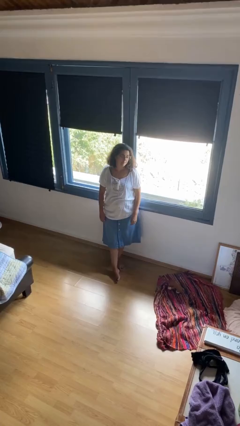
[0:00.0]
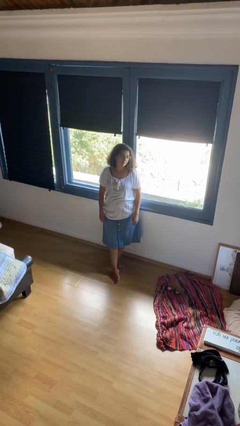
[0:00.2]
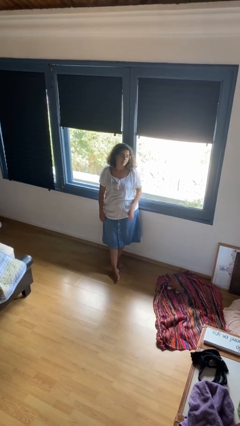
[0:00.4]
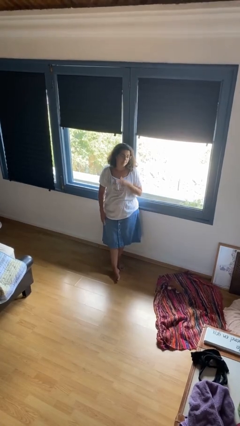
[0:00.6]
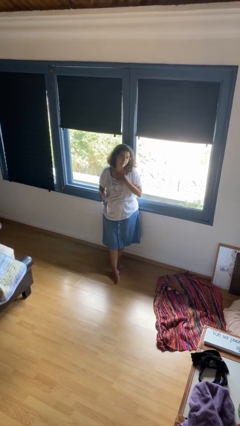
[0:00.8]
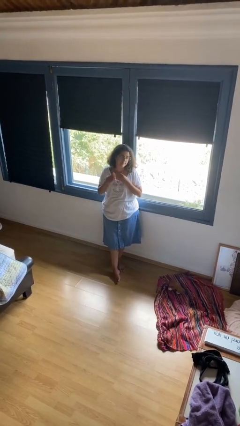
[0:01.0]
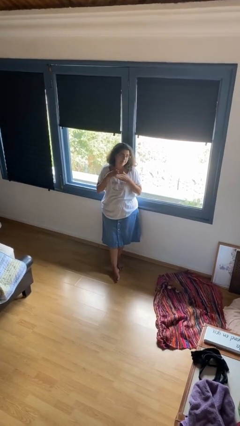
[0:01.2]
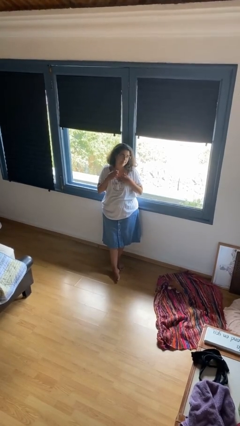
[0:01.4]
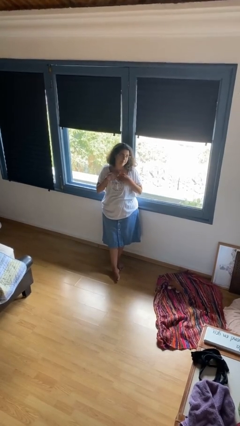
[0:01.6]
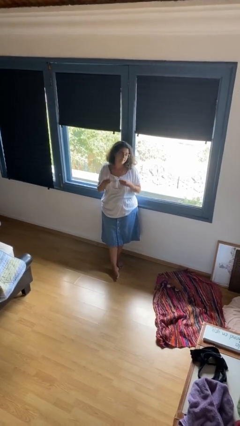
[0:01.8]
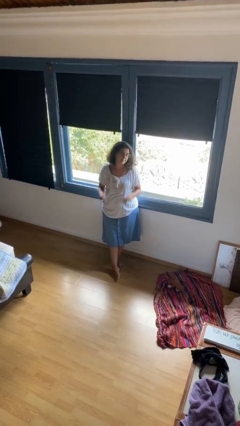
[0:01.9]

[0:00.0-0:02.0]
person drums on chest

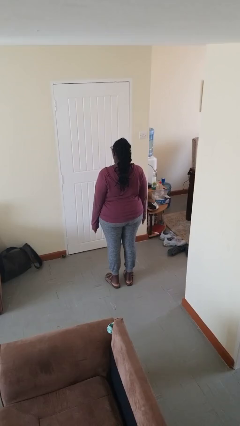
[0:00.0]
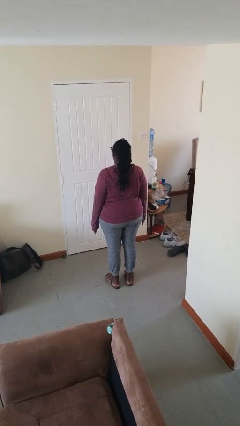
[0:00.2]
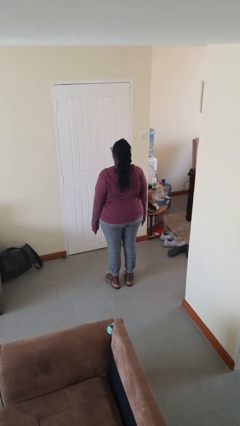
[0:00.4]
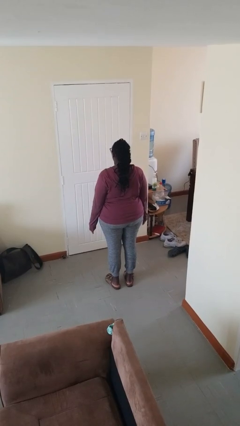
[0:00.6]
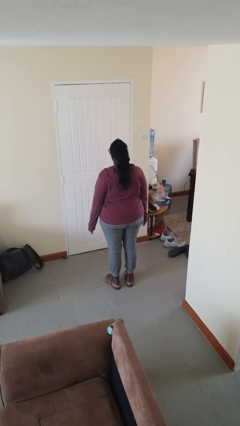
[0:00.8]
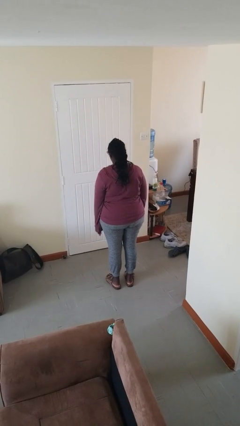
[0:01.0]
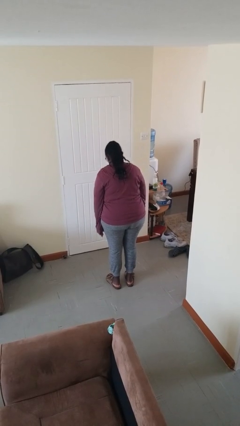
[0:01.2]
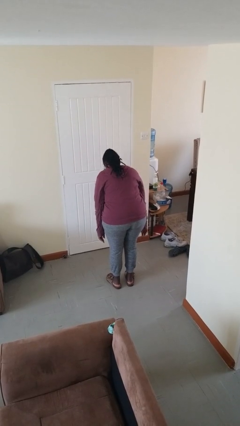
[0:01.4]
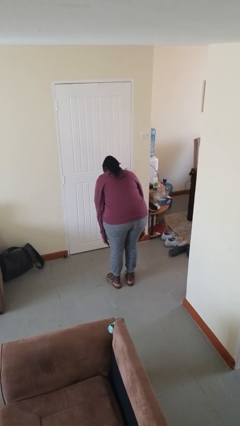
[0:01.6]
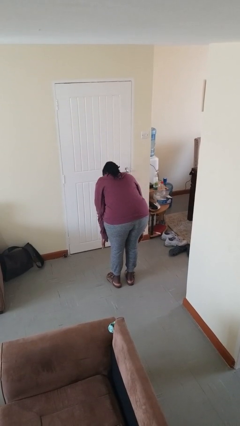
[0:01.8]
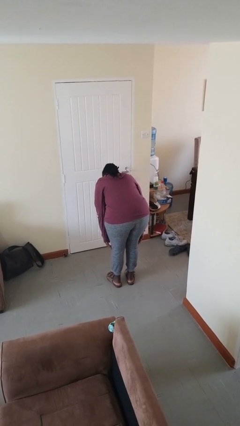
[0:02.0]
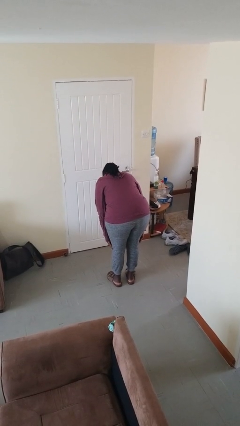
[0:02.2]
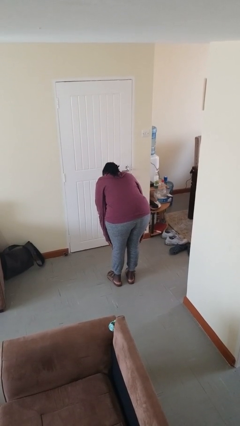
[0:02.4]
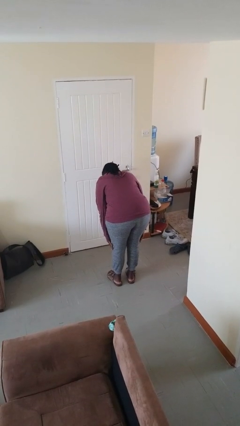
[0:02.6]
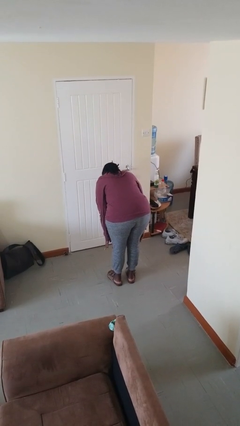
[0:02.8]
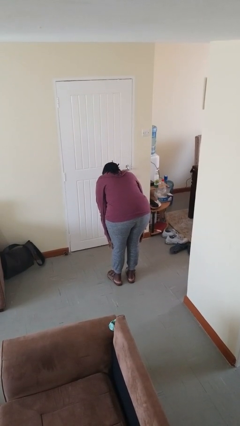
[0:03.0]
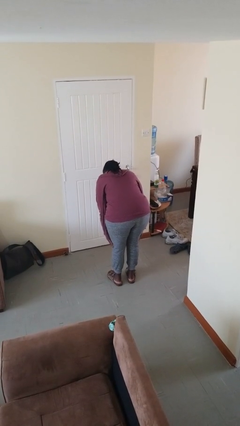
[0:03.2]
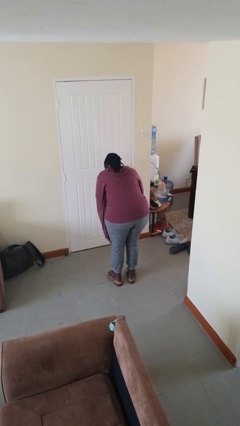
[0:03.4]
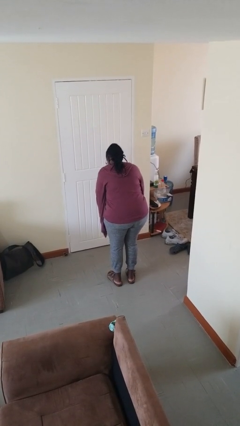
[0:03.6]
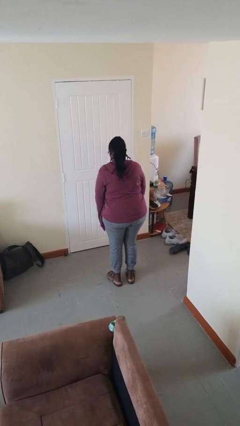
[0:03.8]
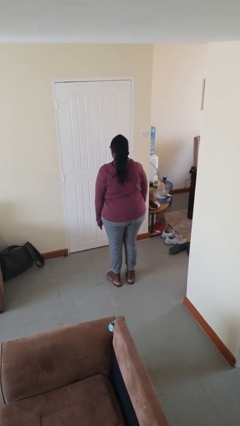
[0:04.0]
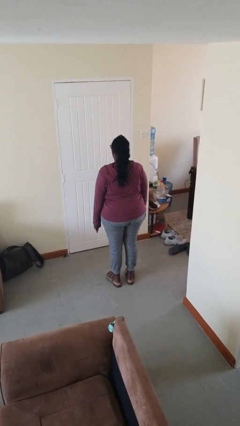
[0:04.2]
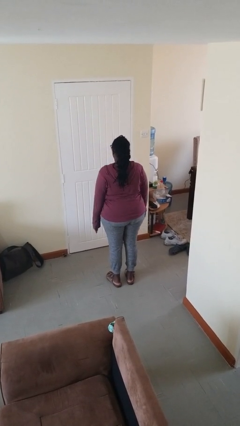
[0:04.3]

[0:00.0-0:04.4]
person bows

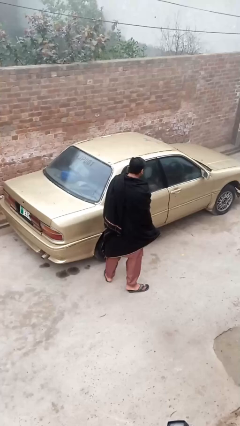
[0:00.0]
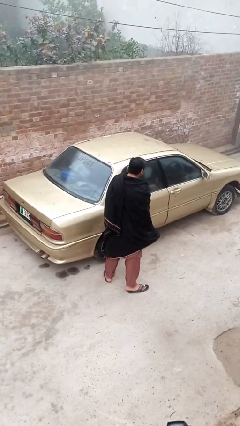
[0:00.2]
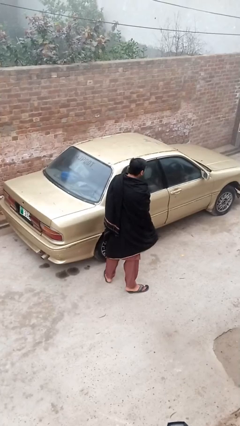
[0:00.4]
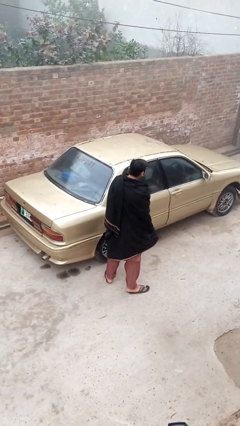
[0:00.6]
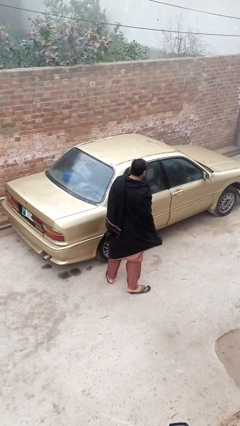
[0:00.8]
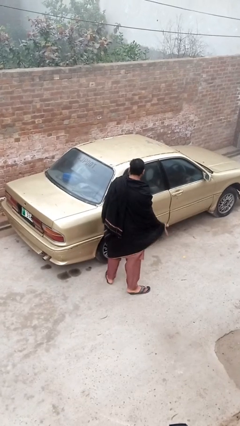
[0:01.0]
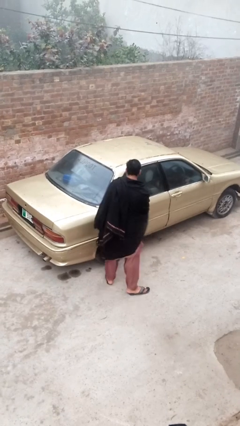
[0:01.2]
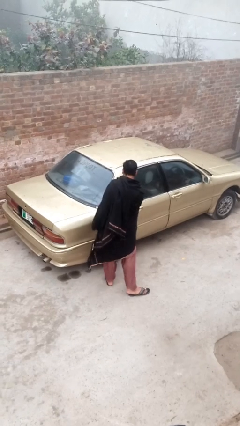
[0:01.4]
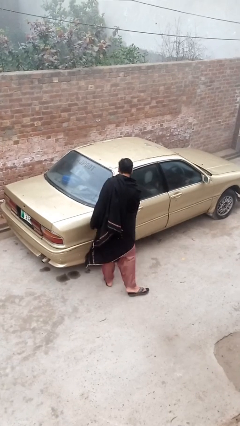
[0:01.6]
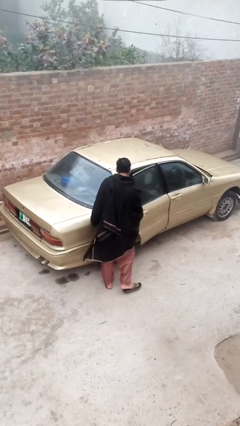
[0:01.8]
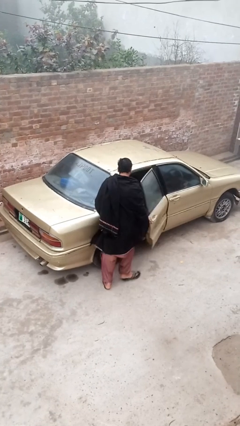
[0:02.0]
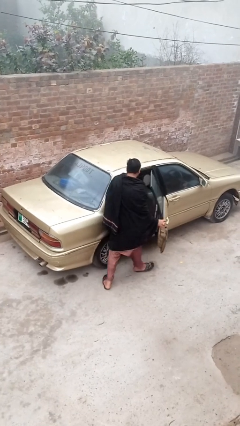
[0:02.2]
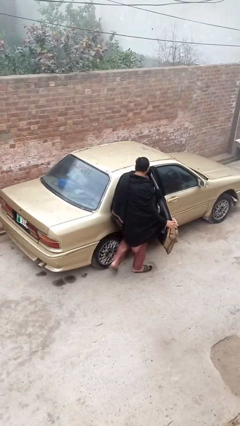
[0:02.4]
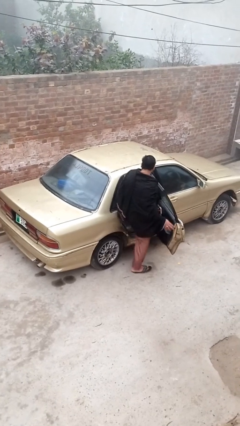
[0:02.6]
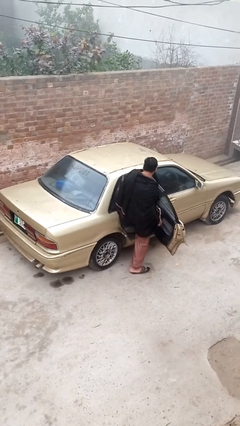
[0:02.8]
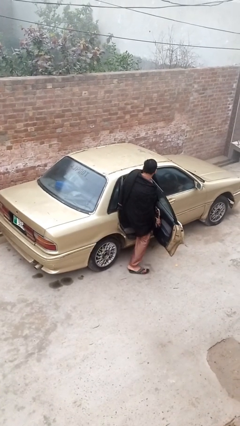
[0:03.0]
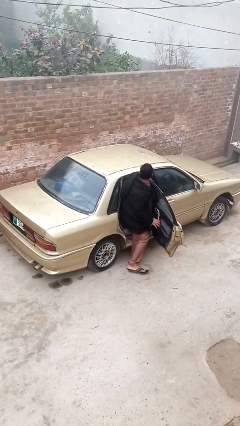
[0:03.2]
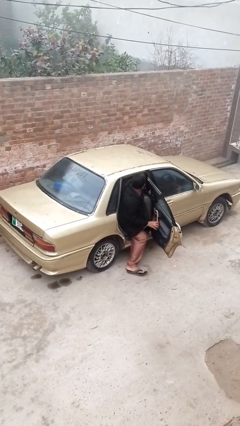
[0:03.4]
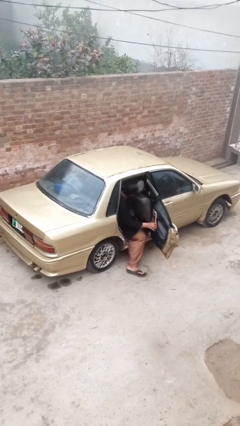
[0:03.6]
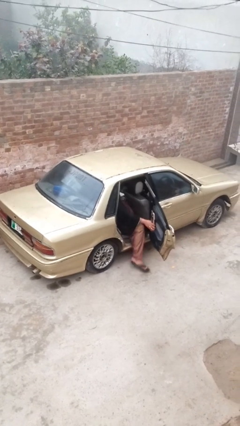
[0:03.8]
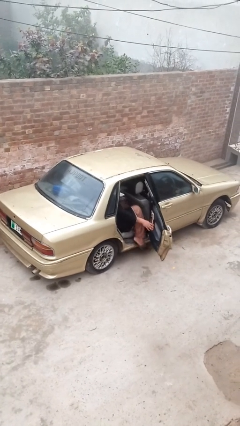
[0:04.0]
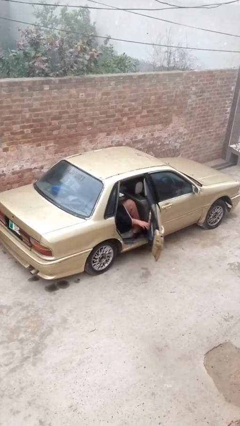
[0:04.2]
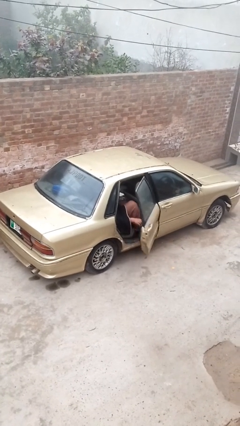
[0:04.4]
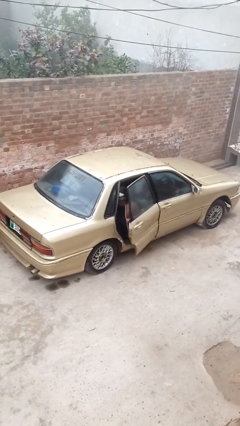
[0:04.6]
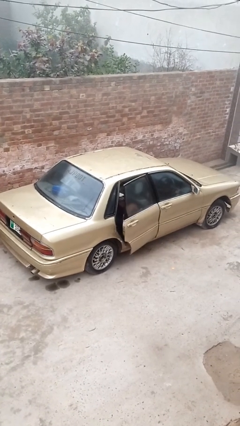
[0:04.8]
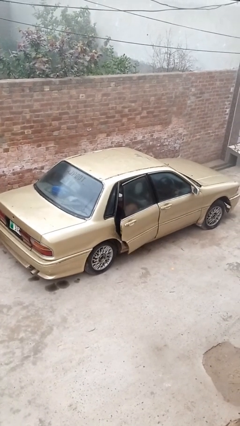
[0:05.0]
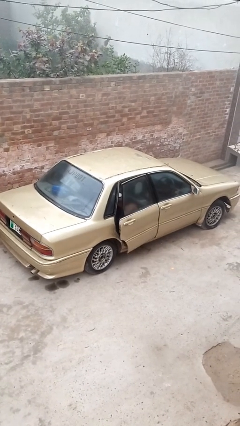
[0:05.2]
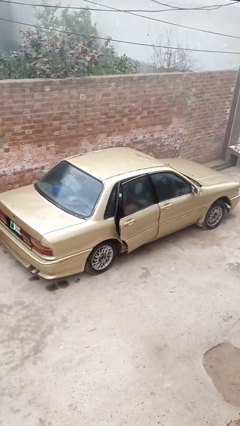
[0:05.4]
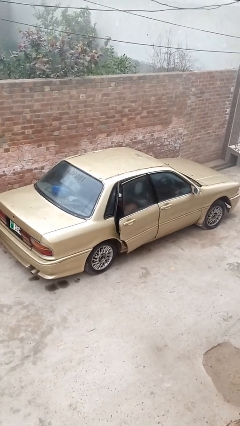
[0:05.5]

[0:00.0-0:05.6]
car picks up person

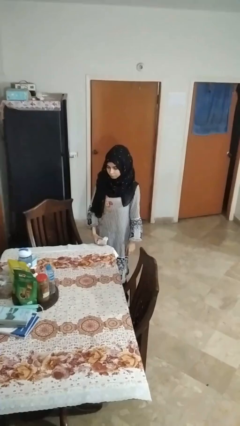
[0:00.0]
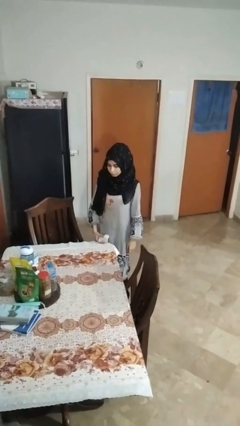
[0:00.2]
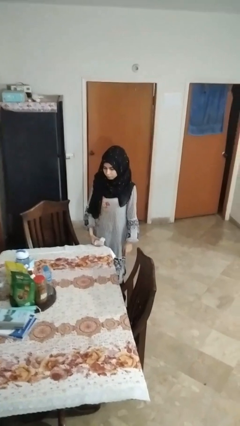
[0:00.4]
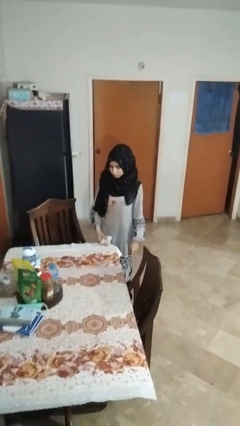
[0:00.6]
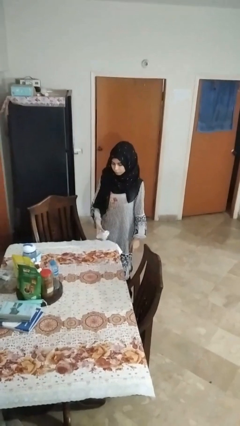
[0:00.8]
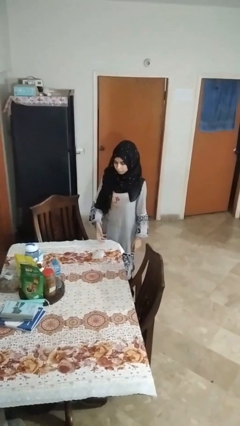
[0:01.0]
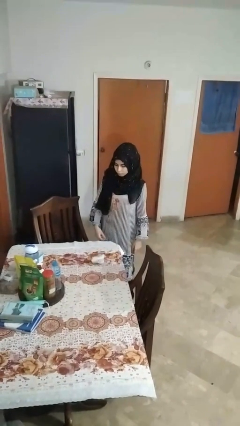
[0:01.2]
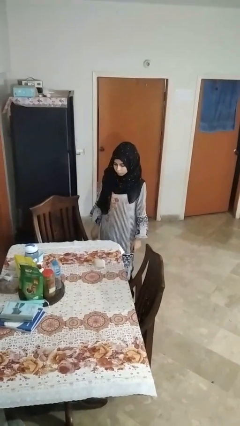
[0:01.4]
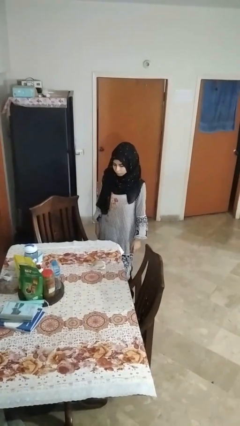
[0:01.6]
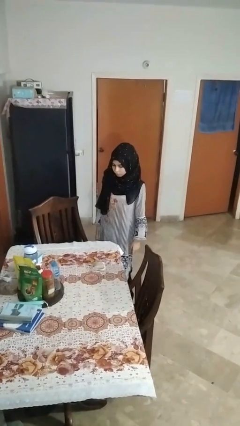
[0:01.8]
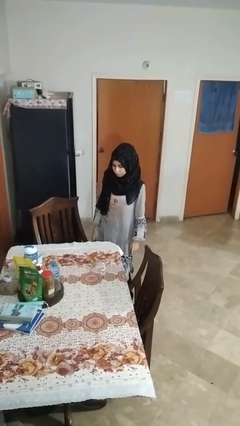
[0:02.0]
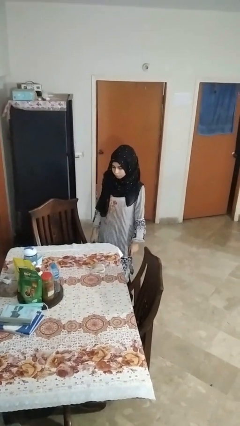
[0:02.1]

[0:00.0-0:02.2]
person throws object on table

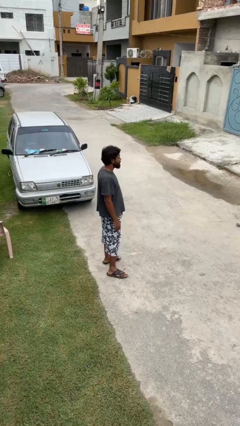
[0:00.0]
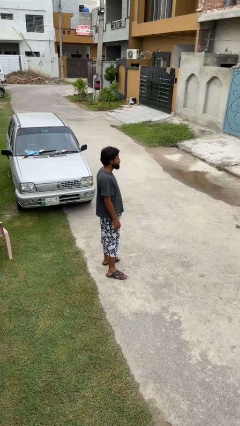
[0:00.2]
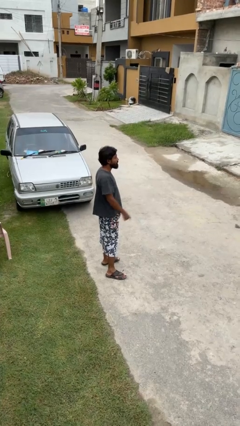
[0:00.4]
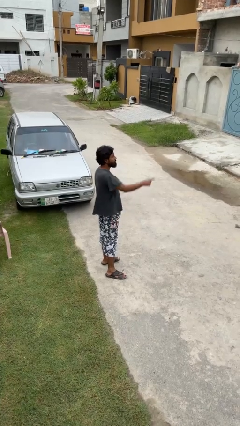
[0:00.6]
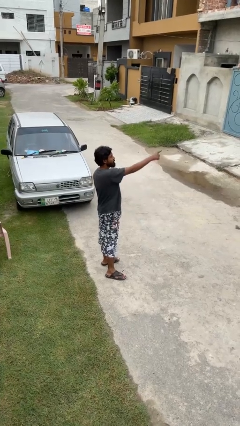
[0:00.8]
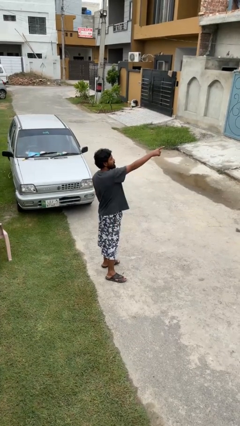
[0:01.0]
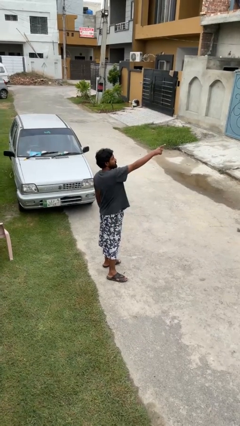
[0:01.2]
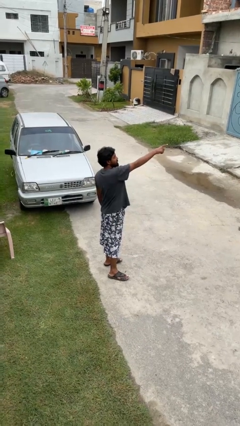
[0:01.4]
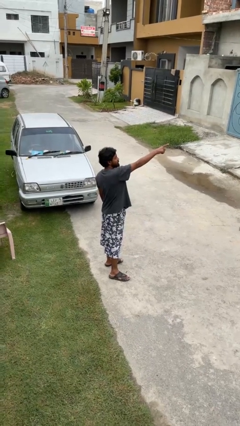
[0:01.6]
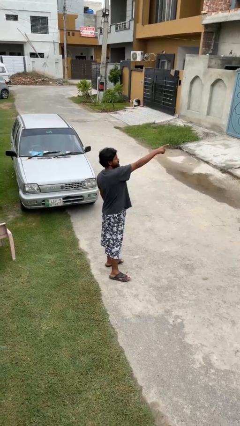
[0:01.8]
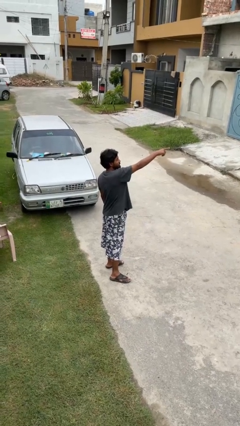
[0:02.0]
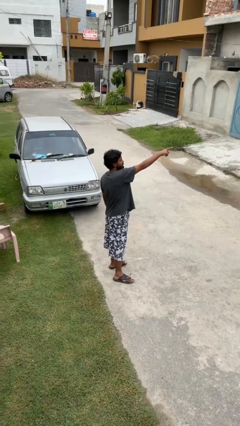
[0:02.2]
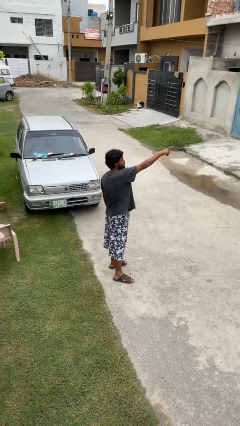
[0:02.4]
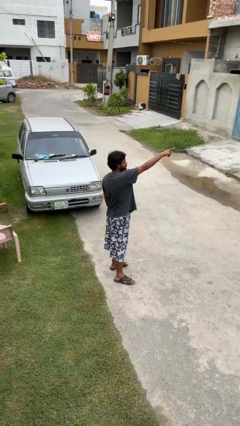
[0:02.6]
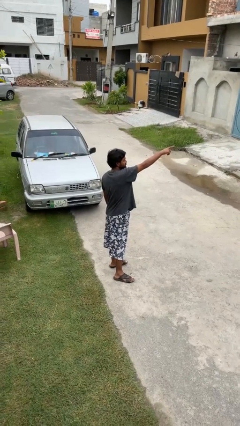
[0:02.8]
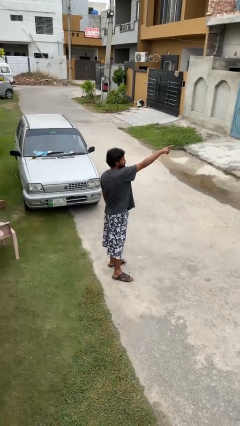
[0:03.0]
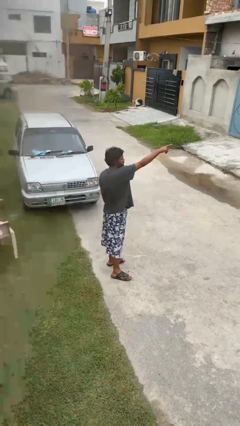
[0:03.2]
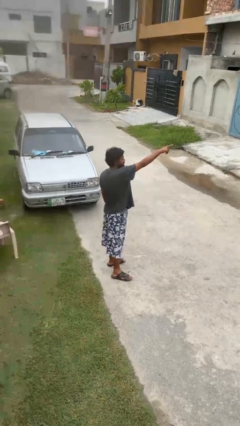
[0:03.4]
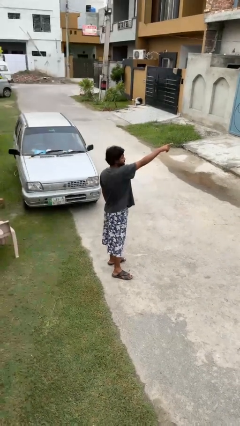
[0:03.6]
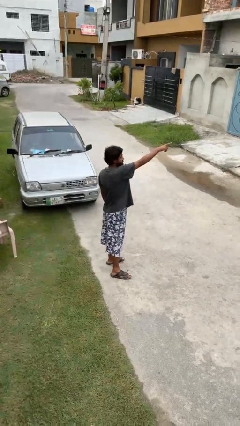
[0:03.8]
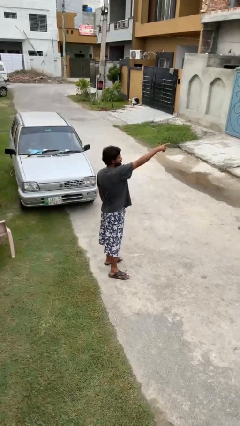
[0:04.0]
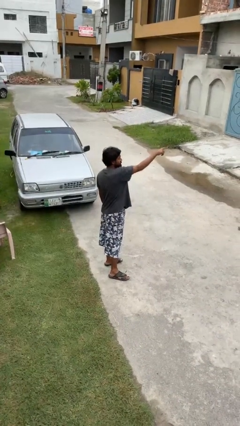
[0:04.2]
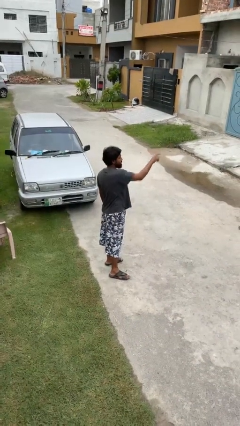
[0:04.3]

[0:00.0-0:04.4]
person points at person
